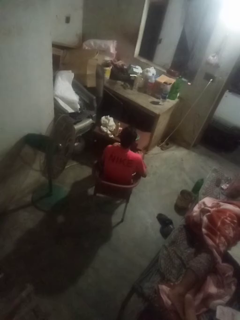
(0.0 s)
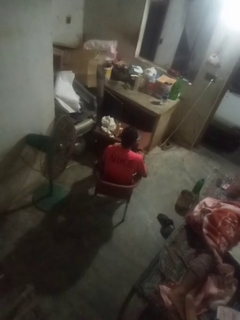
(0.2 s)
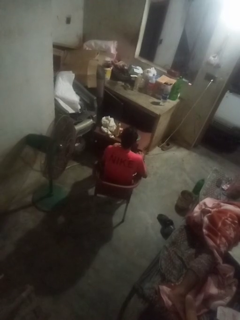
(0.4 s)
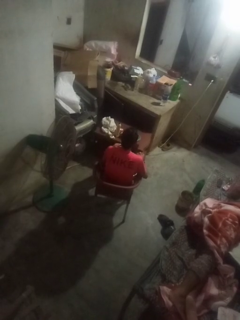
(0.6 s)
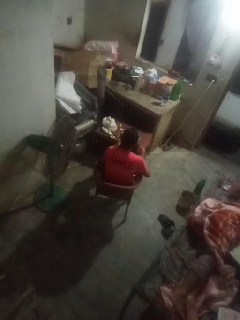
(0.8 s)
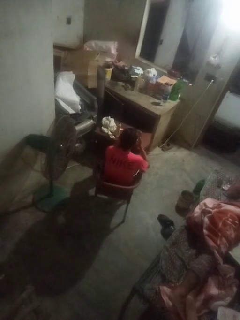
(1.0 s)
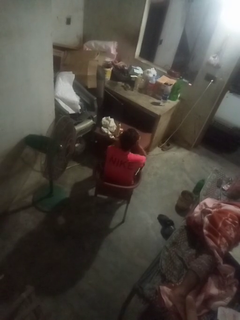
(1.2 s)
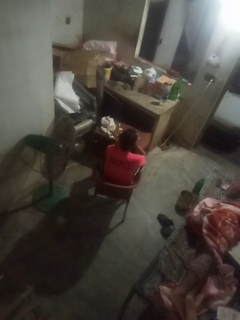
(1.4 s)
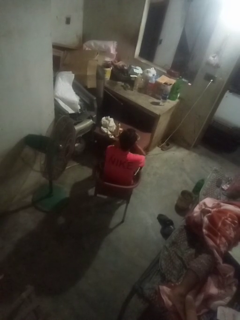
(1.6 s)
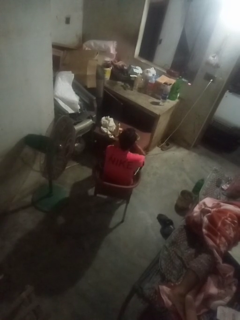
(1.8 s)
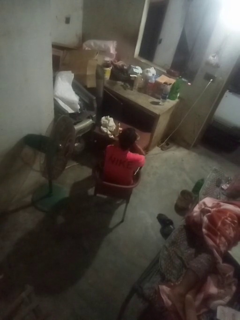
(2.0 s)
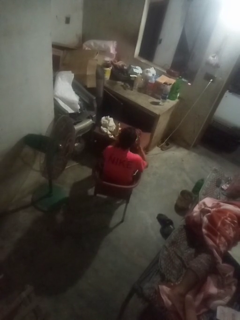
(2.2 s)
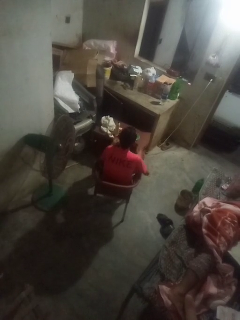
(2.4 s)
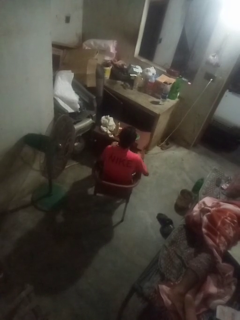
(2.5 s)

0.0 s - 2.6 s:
person yawns

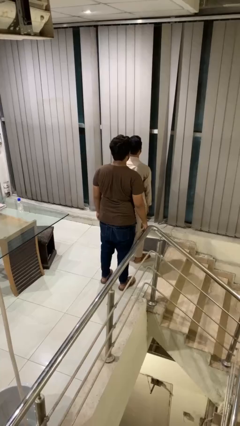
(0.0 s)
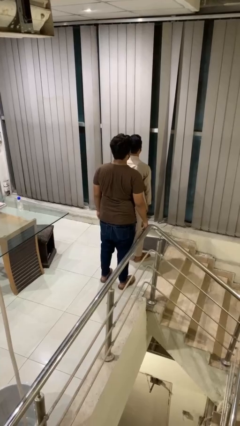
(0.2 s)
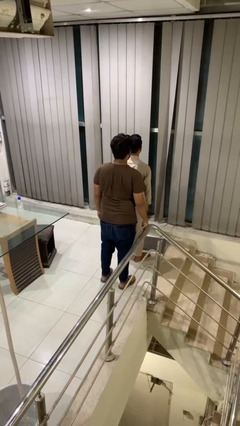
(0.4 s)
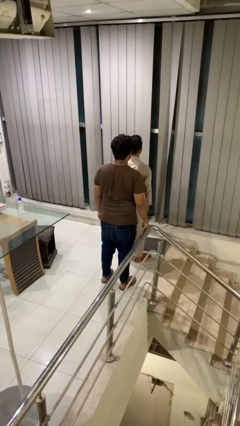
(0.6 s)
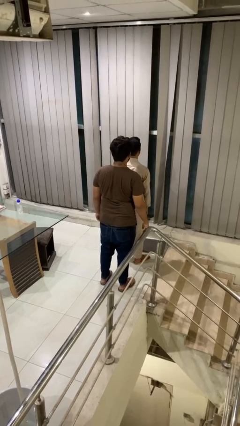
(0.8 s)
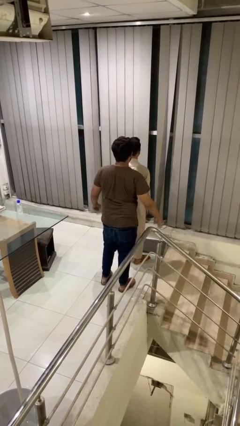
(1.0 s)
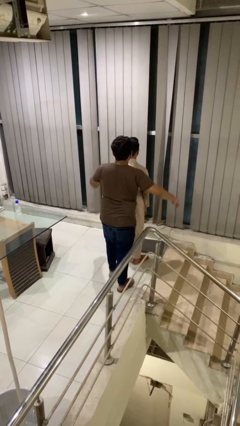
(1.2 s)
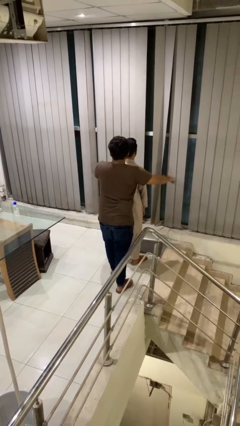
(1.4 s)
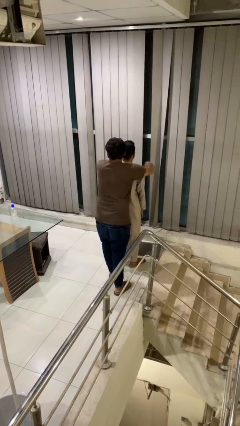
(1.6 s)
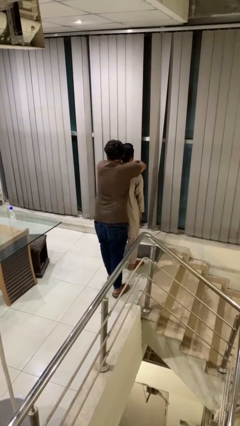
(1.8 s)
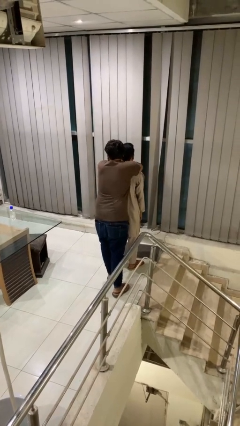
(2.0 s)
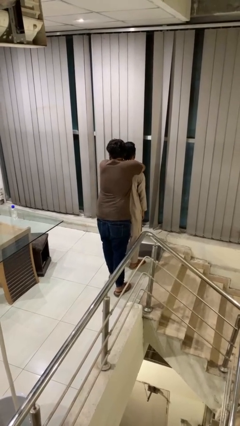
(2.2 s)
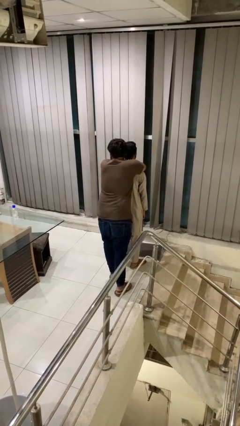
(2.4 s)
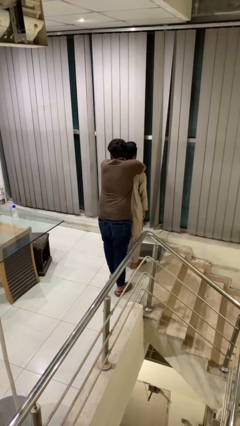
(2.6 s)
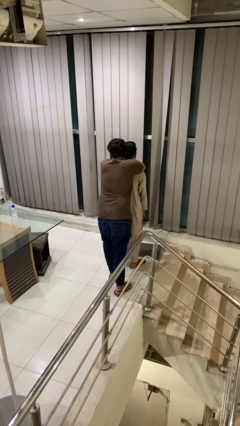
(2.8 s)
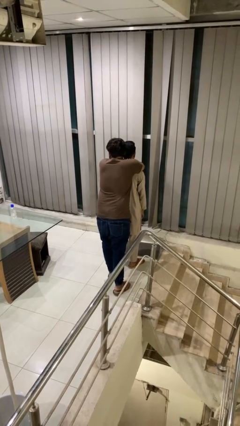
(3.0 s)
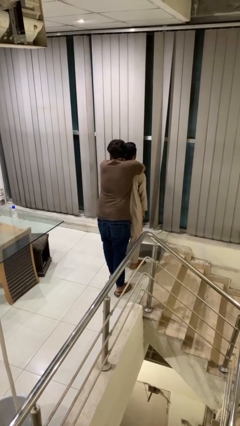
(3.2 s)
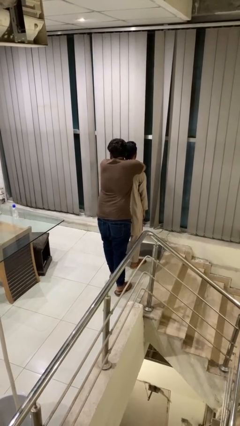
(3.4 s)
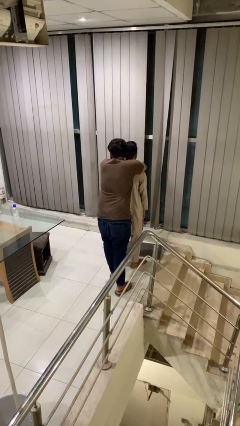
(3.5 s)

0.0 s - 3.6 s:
person hugs person from behind

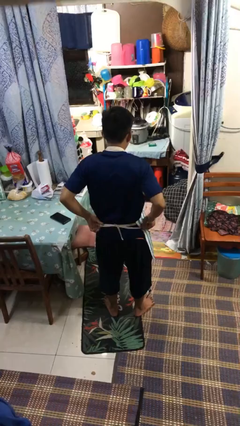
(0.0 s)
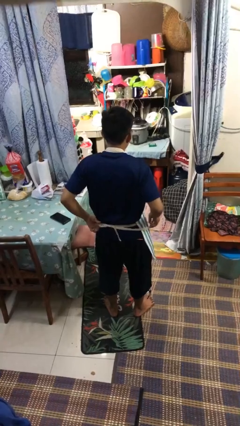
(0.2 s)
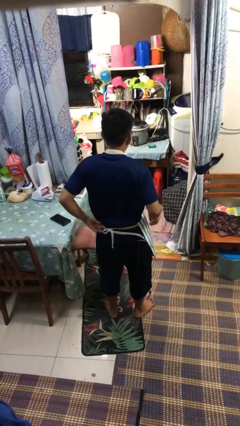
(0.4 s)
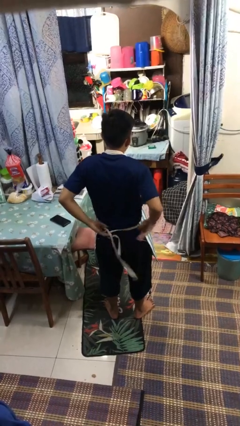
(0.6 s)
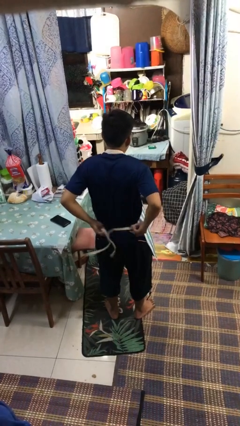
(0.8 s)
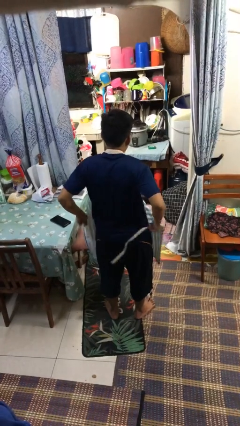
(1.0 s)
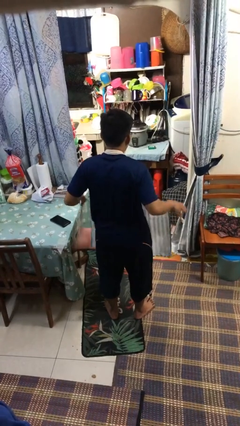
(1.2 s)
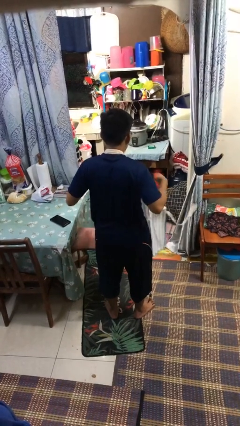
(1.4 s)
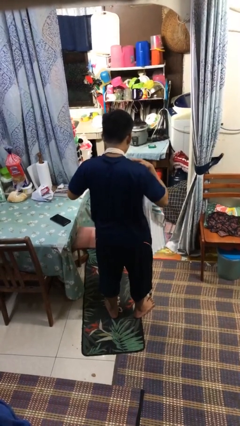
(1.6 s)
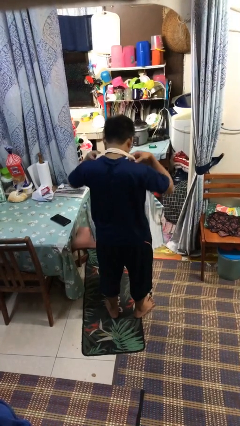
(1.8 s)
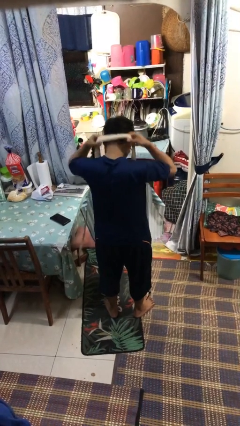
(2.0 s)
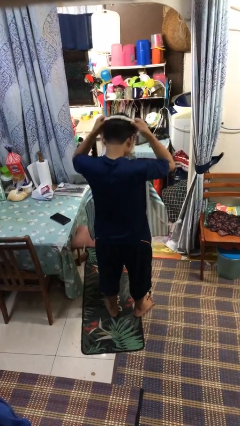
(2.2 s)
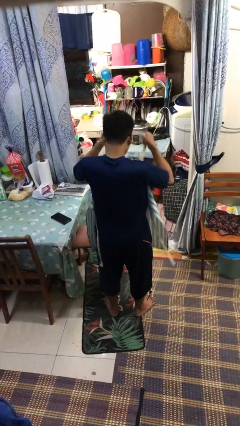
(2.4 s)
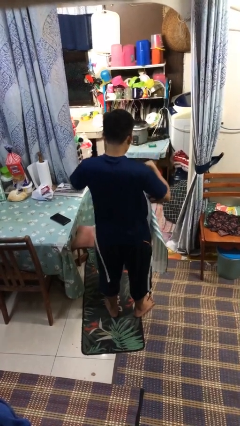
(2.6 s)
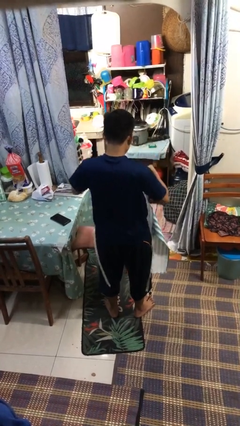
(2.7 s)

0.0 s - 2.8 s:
person takes off apron

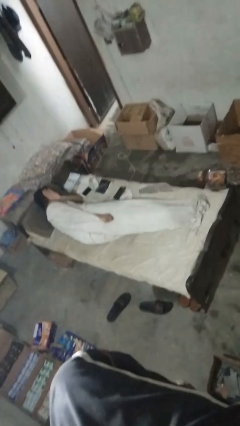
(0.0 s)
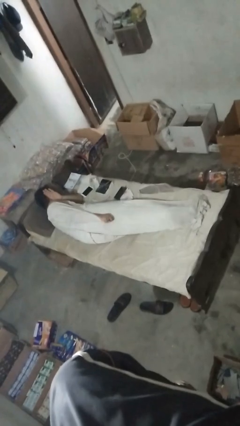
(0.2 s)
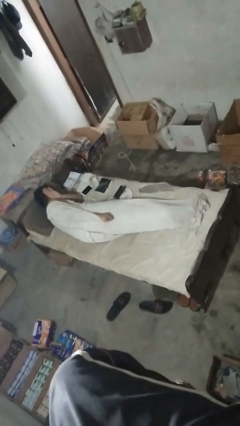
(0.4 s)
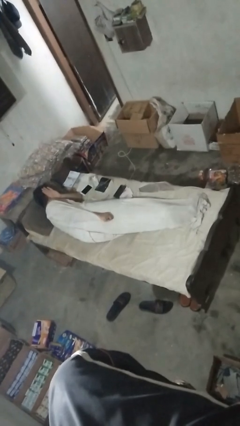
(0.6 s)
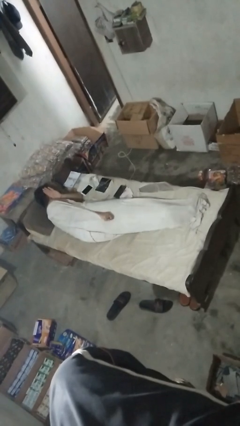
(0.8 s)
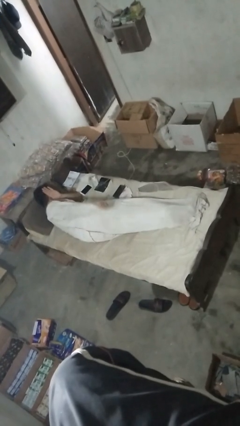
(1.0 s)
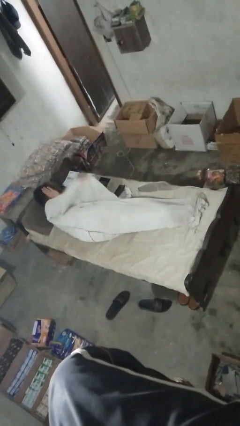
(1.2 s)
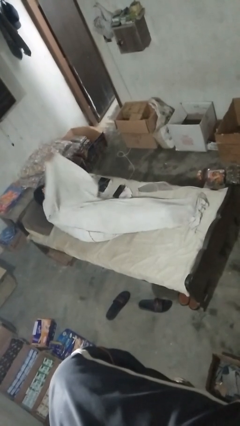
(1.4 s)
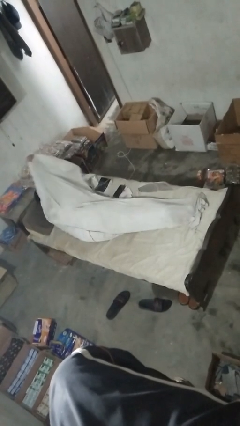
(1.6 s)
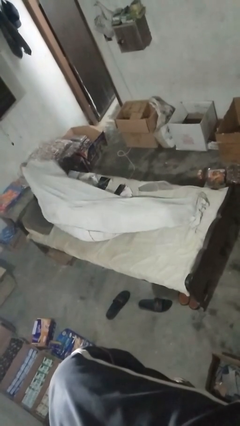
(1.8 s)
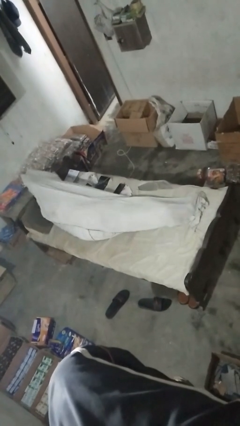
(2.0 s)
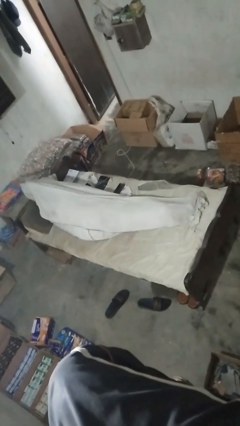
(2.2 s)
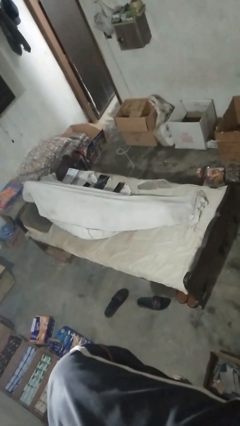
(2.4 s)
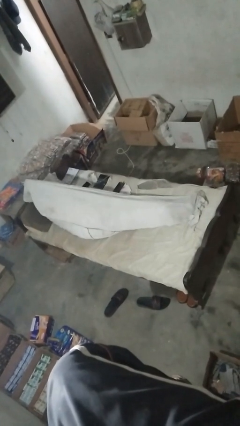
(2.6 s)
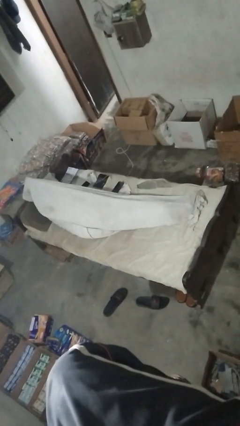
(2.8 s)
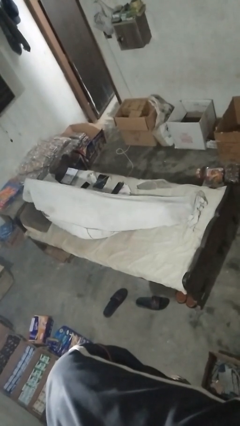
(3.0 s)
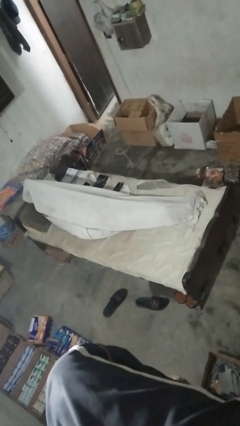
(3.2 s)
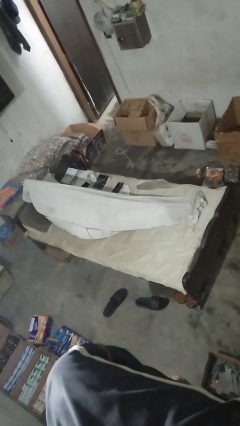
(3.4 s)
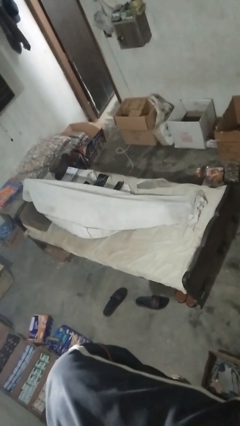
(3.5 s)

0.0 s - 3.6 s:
person covers with bedsheets

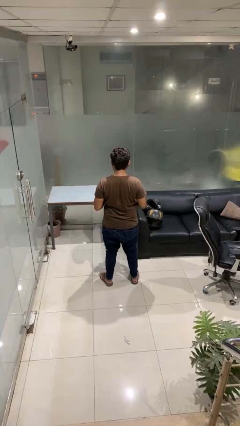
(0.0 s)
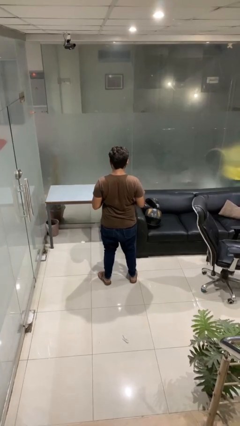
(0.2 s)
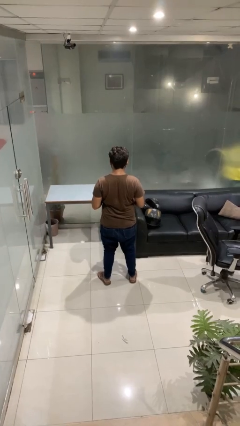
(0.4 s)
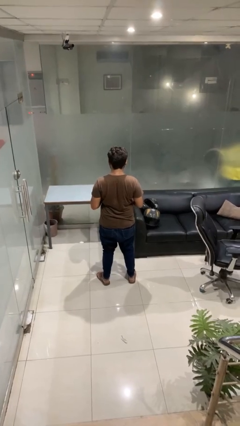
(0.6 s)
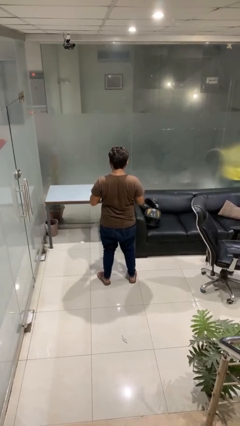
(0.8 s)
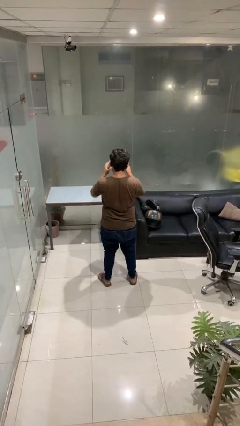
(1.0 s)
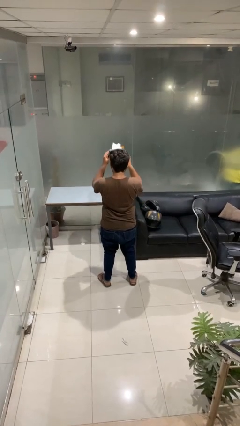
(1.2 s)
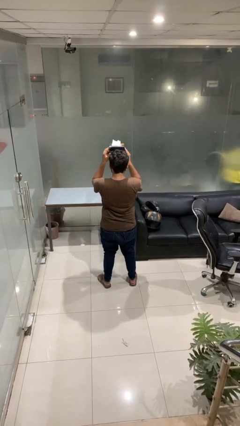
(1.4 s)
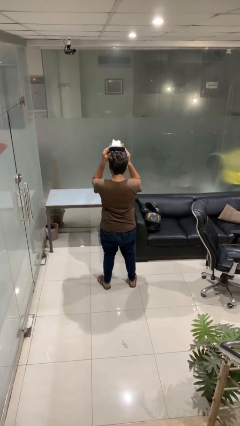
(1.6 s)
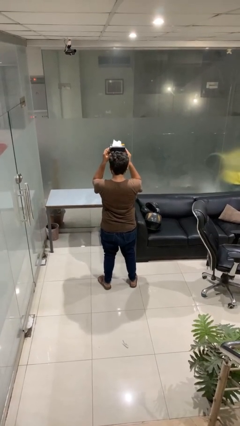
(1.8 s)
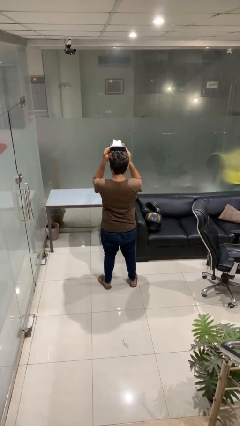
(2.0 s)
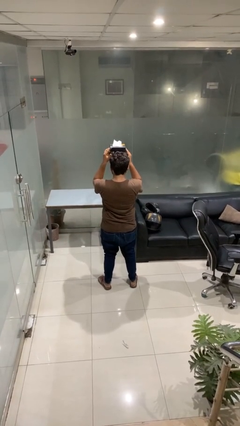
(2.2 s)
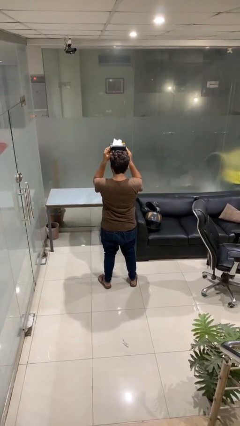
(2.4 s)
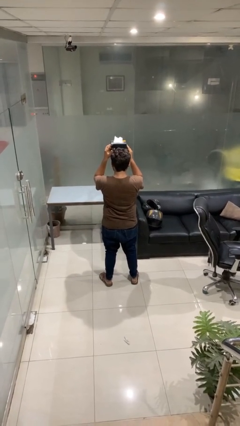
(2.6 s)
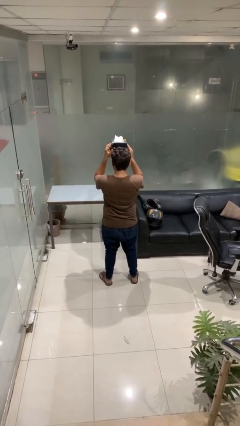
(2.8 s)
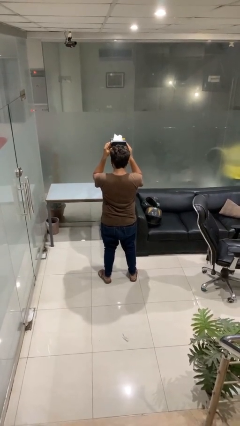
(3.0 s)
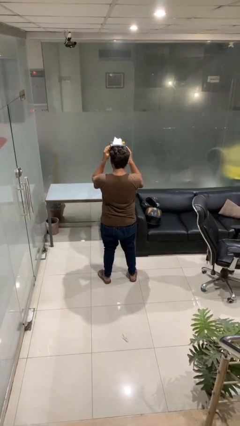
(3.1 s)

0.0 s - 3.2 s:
person holds object above head

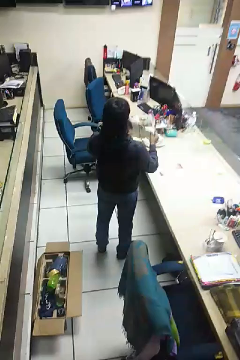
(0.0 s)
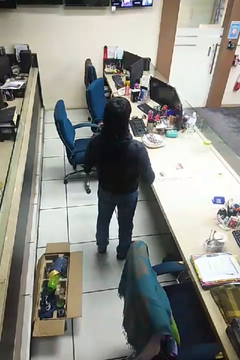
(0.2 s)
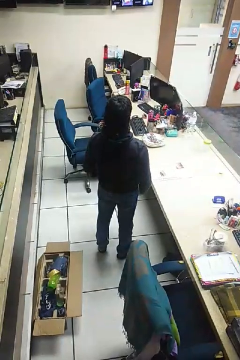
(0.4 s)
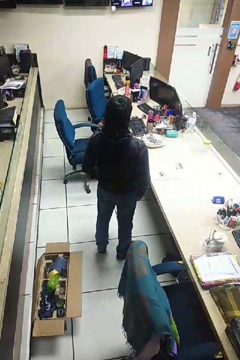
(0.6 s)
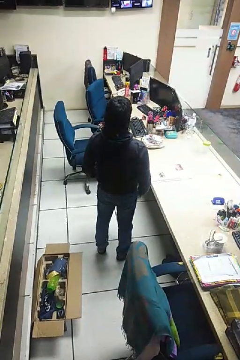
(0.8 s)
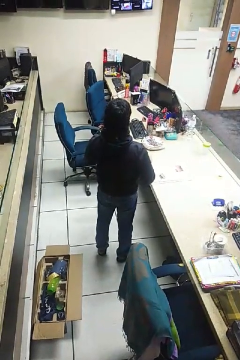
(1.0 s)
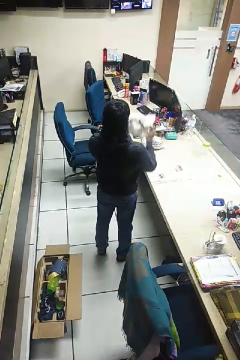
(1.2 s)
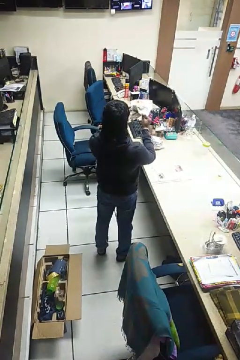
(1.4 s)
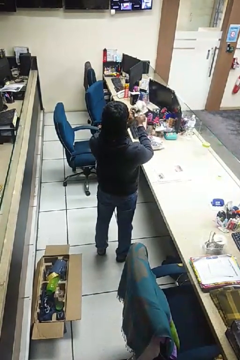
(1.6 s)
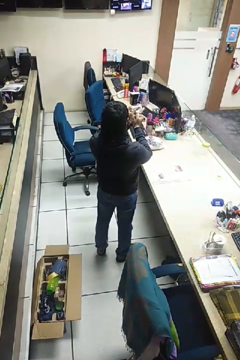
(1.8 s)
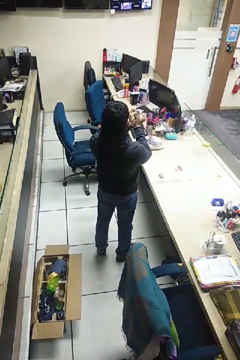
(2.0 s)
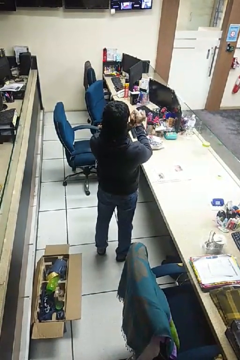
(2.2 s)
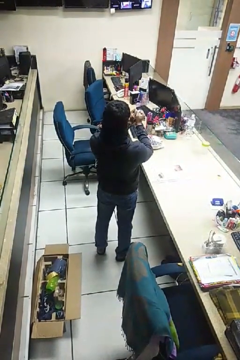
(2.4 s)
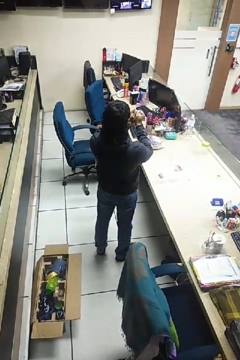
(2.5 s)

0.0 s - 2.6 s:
person crumples paper

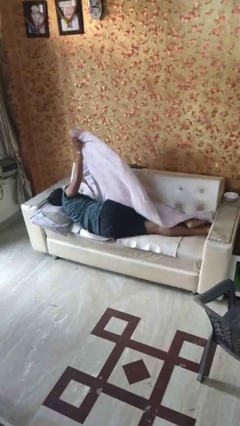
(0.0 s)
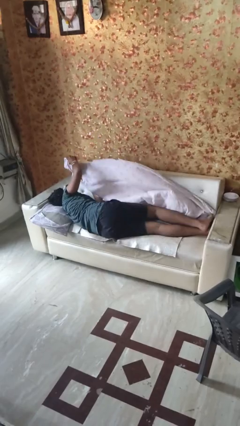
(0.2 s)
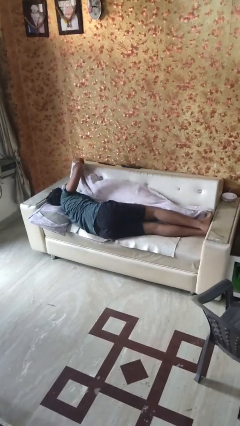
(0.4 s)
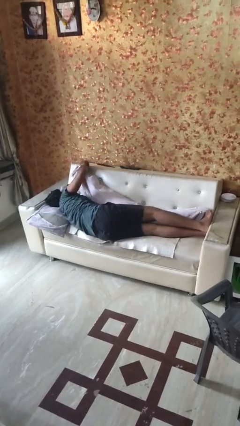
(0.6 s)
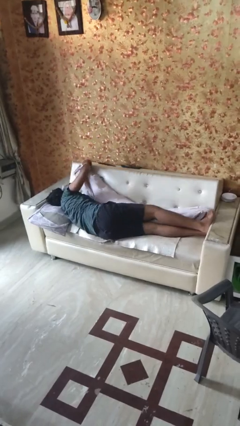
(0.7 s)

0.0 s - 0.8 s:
person uncovers with bedsheets
